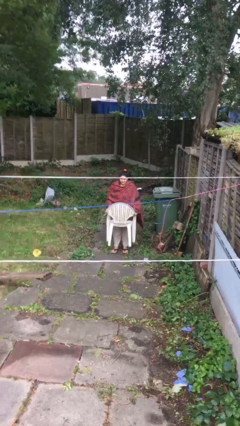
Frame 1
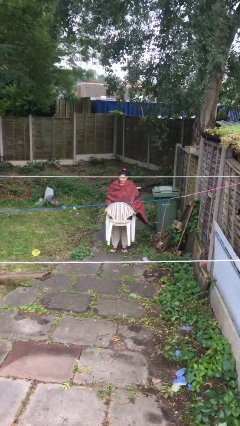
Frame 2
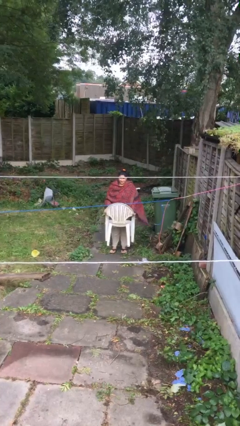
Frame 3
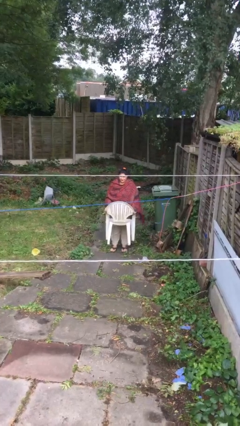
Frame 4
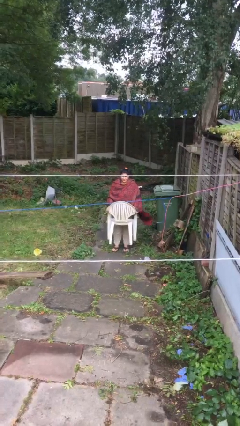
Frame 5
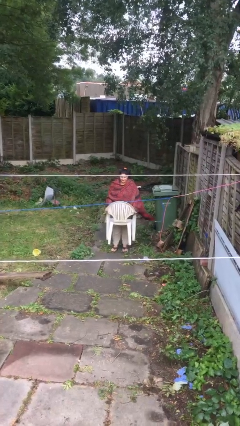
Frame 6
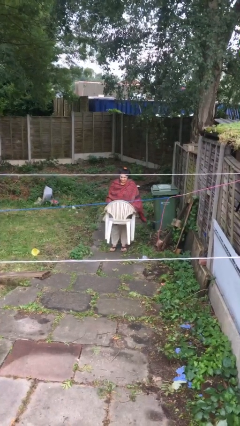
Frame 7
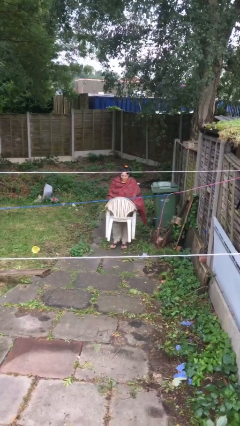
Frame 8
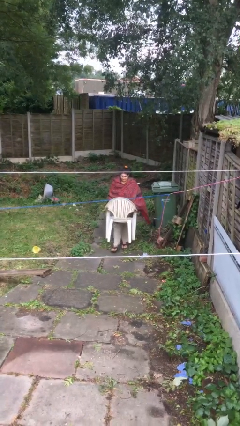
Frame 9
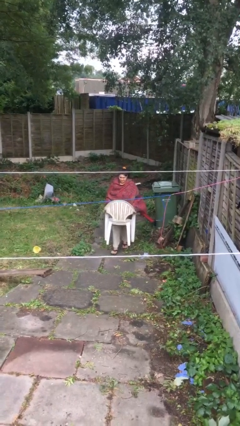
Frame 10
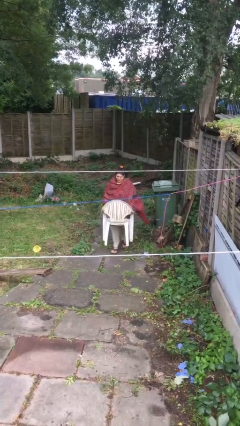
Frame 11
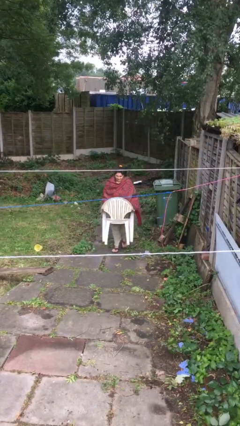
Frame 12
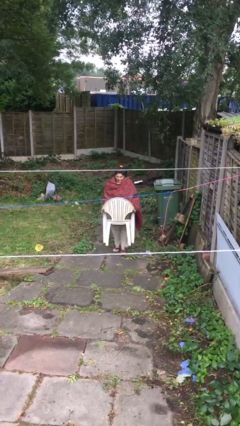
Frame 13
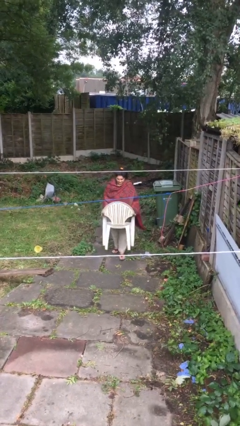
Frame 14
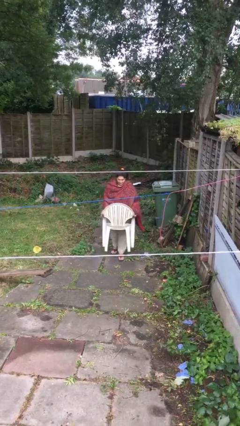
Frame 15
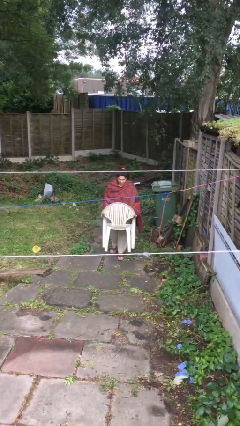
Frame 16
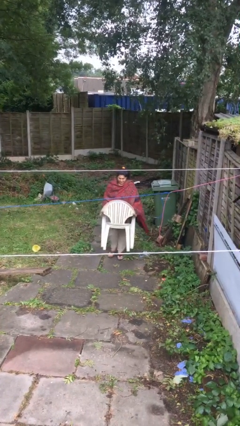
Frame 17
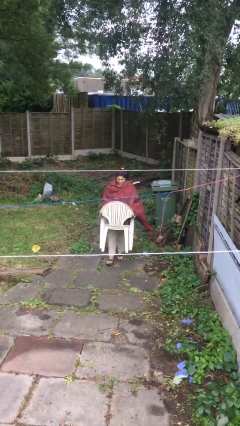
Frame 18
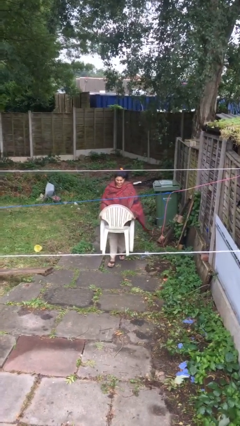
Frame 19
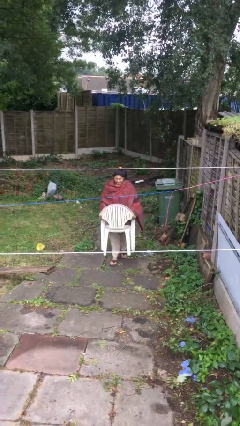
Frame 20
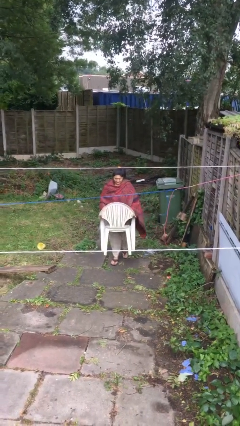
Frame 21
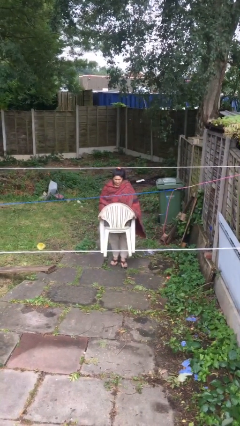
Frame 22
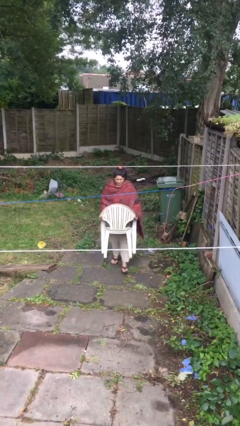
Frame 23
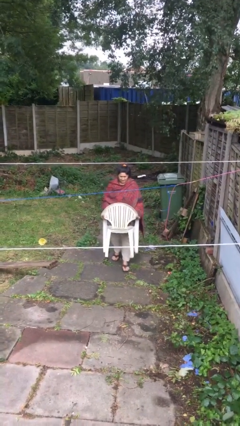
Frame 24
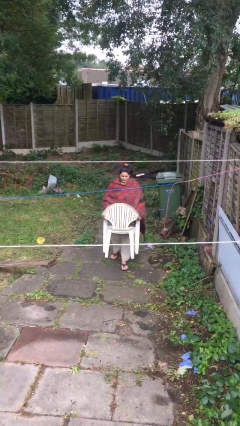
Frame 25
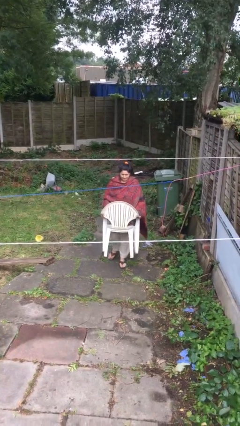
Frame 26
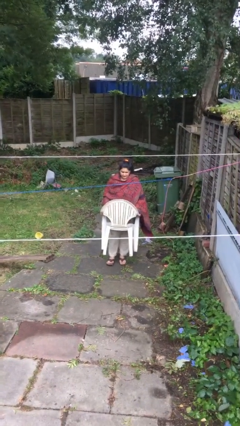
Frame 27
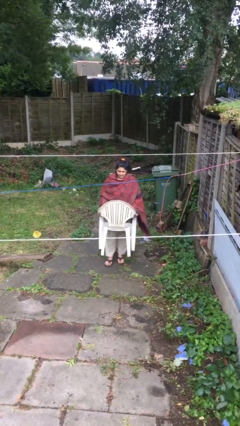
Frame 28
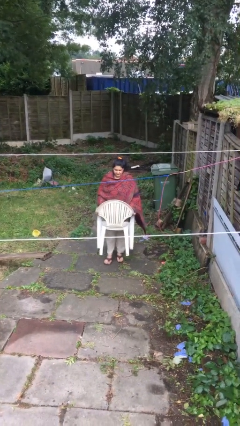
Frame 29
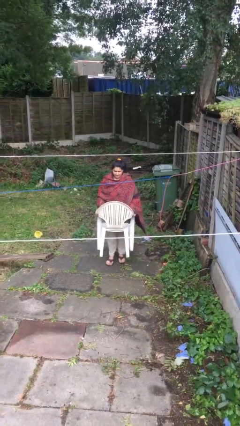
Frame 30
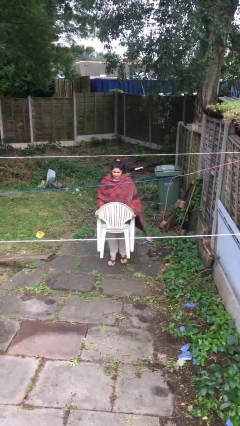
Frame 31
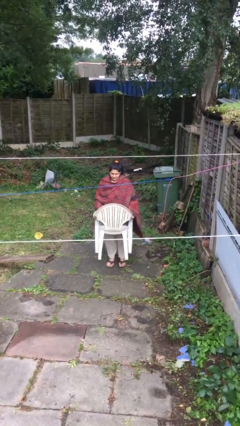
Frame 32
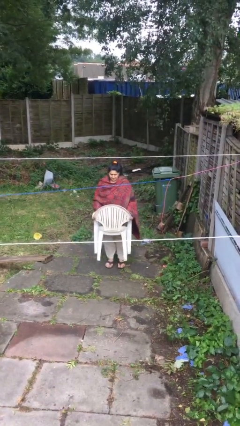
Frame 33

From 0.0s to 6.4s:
person carries heavy object

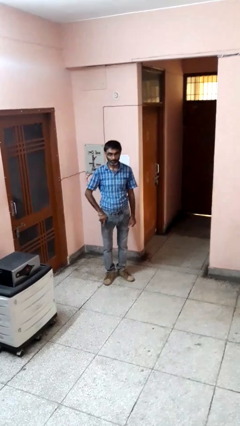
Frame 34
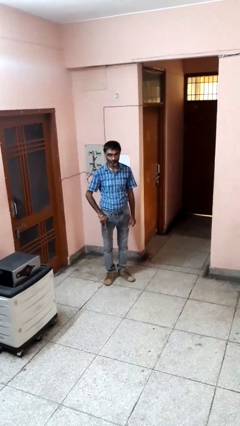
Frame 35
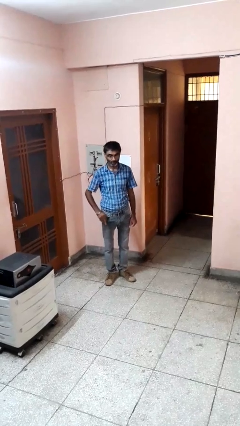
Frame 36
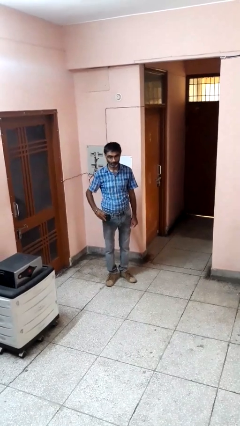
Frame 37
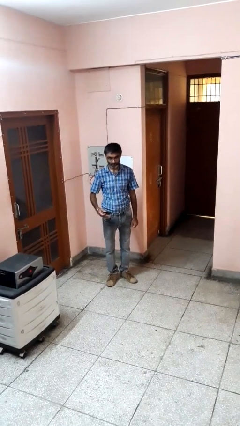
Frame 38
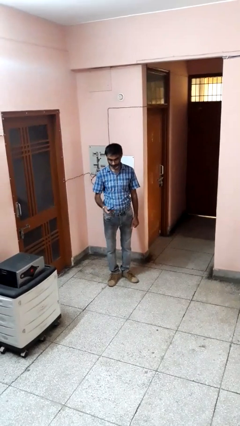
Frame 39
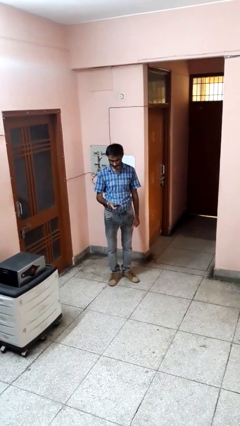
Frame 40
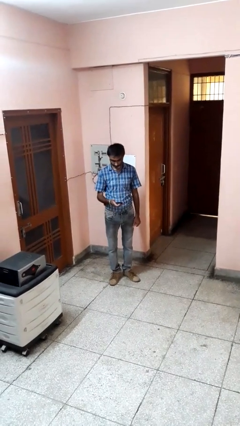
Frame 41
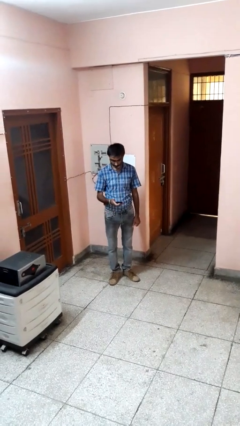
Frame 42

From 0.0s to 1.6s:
person takes phone from pocket

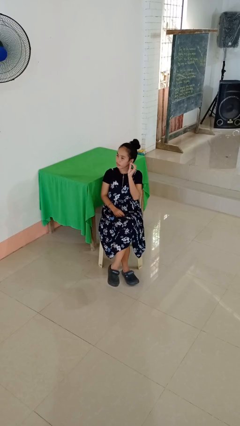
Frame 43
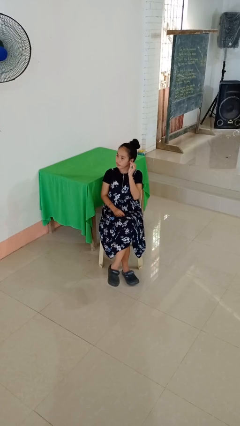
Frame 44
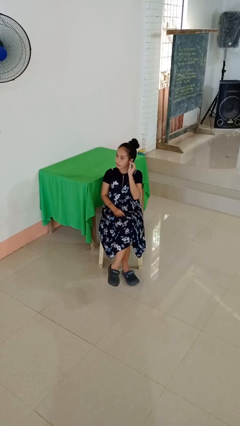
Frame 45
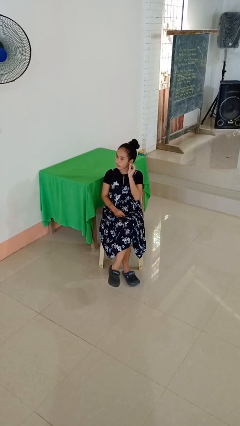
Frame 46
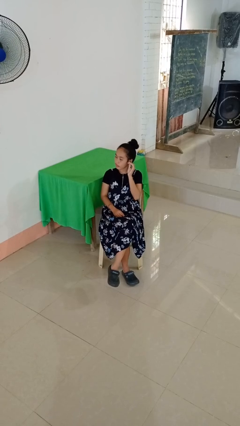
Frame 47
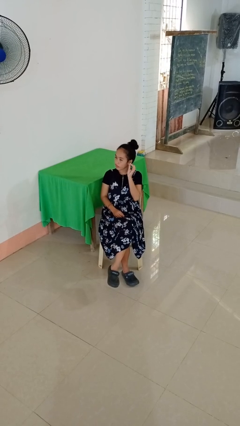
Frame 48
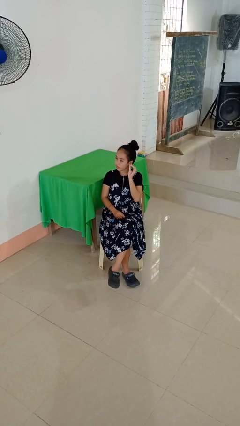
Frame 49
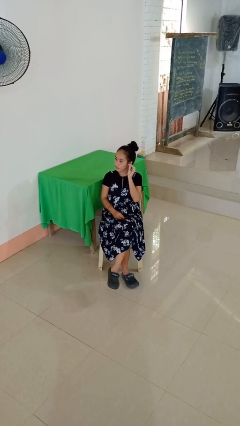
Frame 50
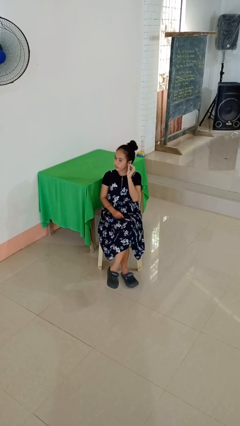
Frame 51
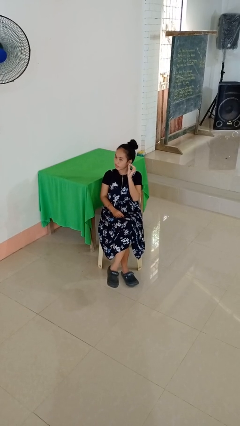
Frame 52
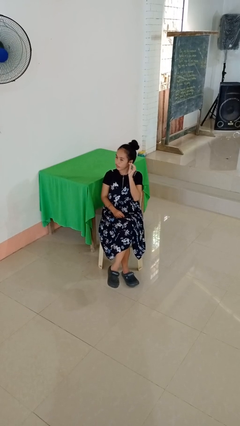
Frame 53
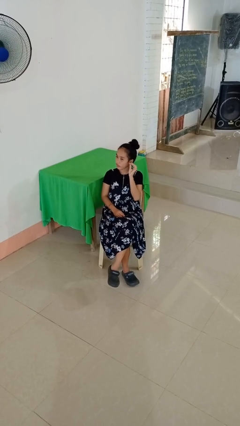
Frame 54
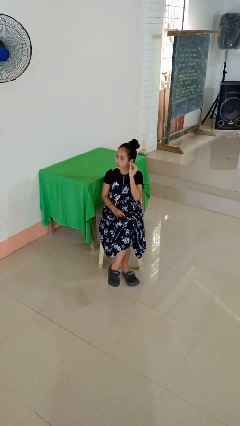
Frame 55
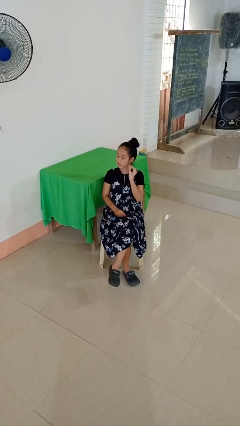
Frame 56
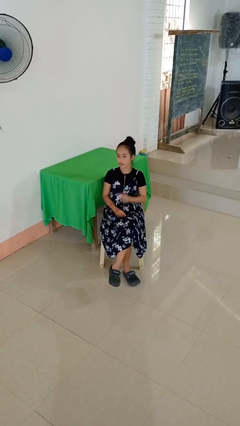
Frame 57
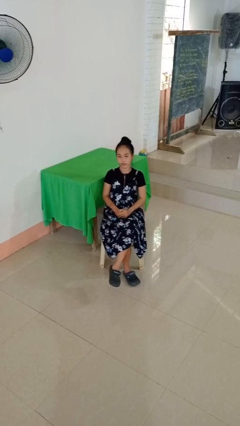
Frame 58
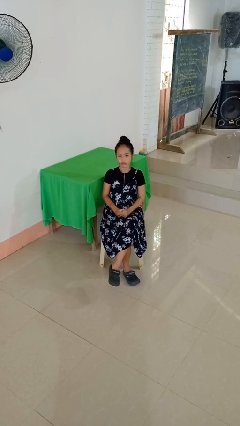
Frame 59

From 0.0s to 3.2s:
person touches earlobe

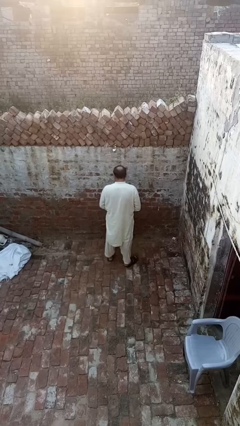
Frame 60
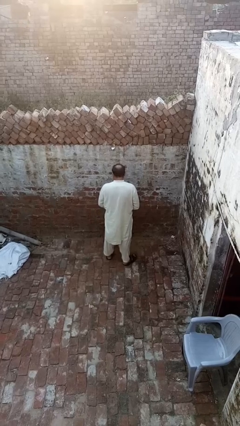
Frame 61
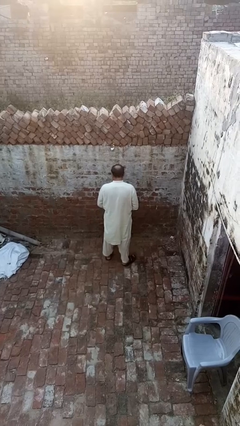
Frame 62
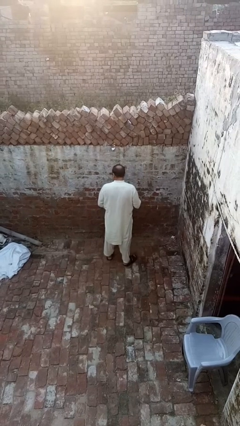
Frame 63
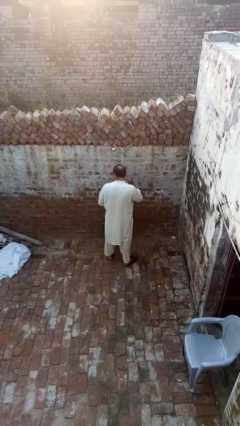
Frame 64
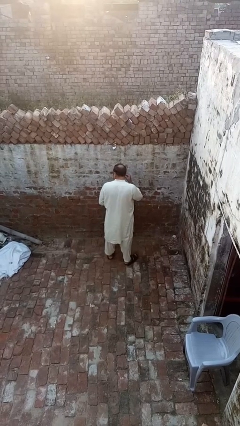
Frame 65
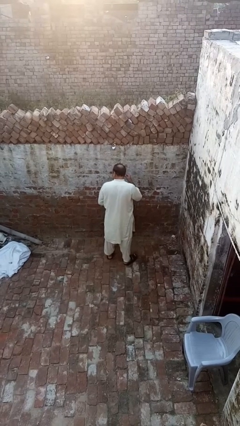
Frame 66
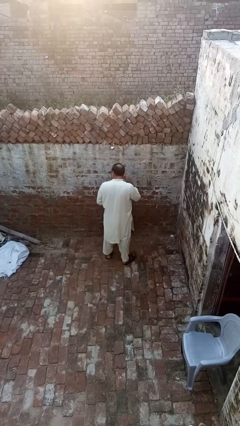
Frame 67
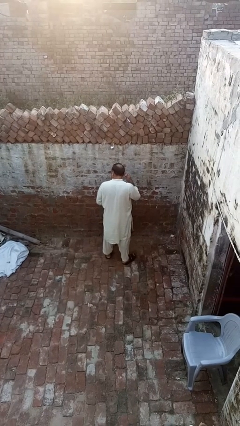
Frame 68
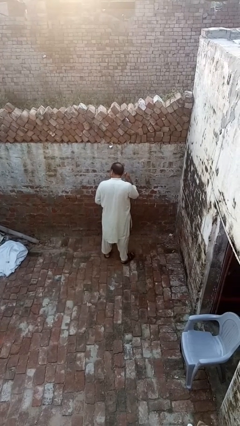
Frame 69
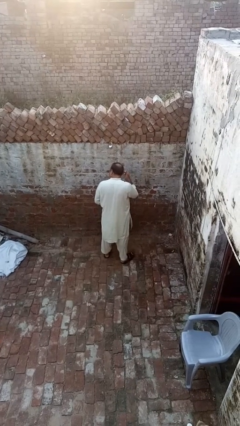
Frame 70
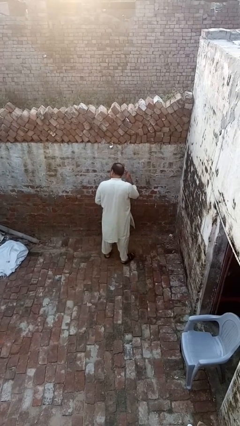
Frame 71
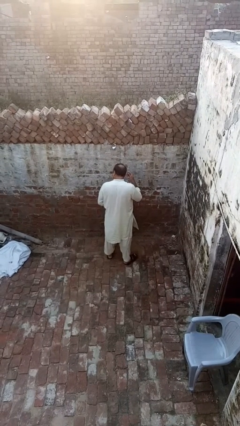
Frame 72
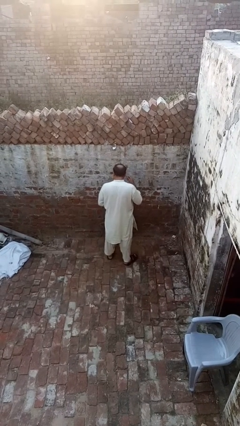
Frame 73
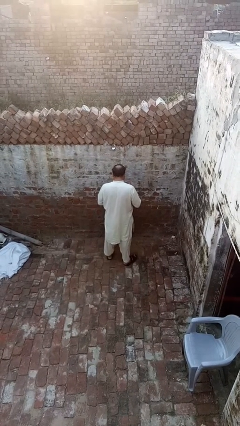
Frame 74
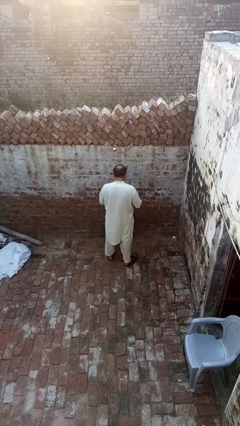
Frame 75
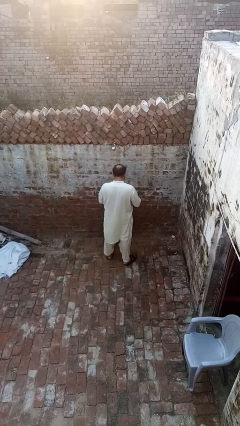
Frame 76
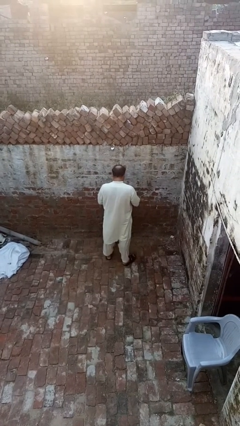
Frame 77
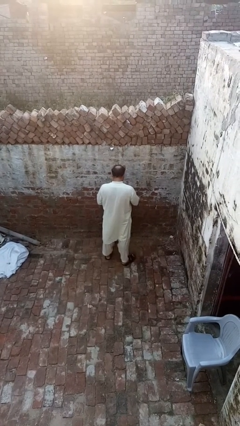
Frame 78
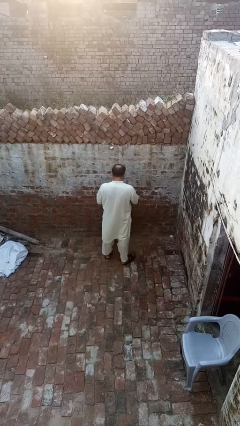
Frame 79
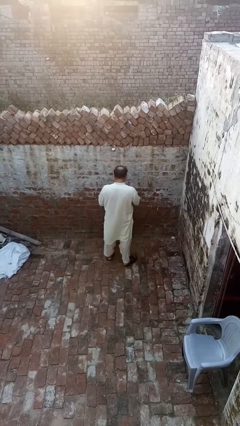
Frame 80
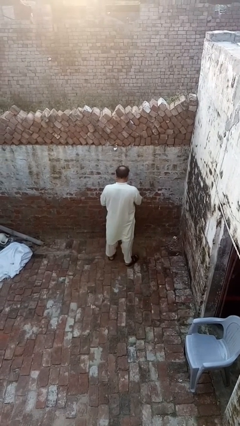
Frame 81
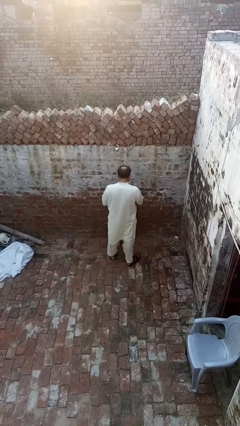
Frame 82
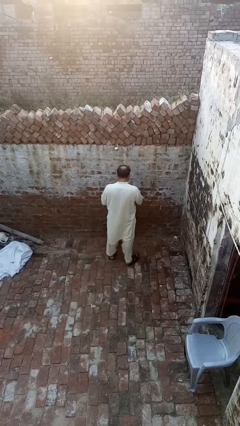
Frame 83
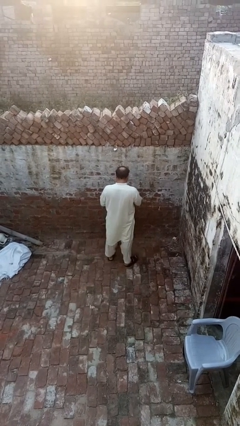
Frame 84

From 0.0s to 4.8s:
person takes off earrings

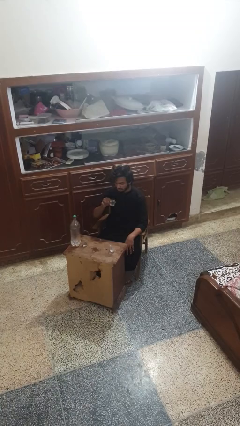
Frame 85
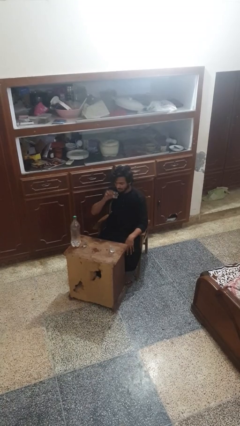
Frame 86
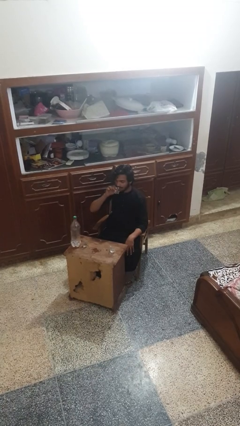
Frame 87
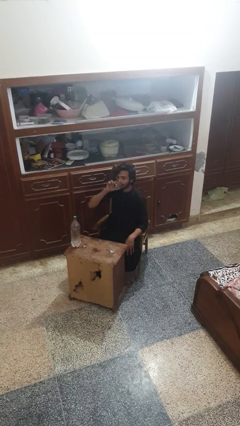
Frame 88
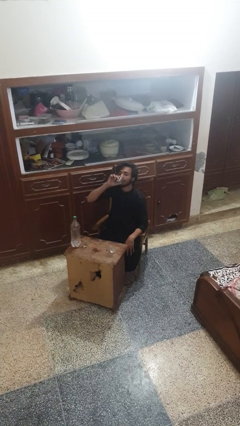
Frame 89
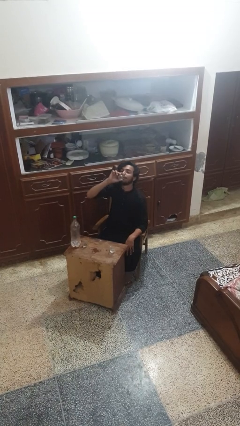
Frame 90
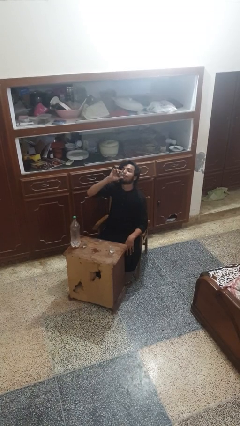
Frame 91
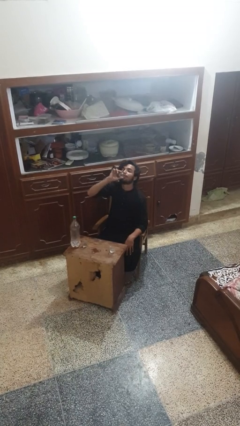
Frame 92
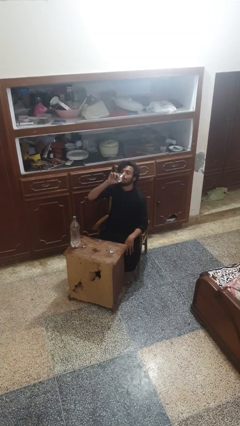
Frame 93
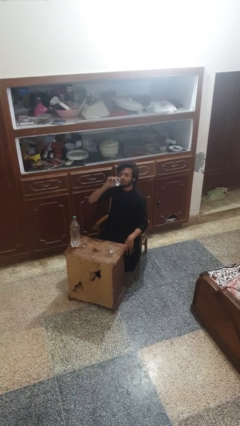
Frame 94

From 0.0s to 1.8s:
person drinks from shotglass
